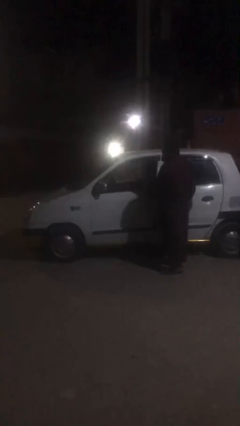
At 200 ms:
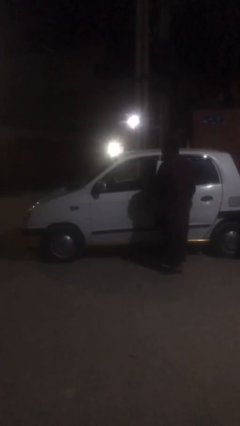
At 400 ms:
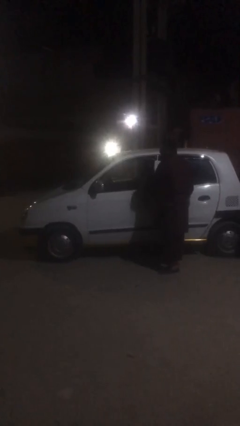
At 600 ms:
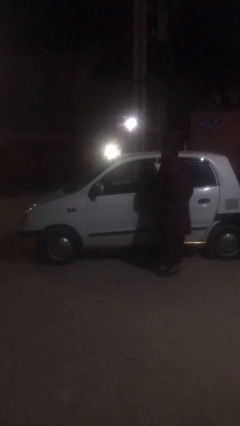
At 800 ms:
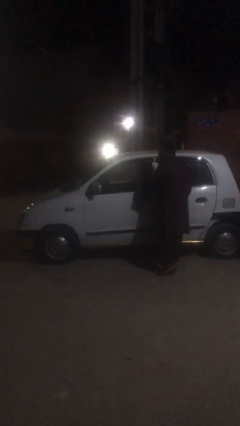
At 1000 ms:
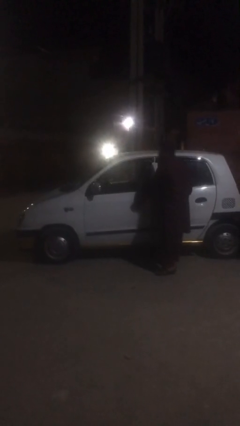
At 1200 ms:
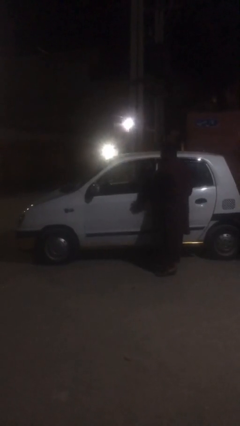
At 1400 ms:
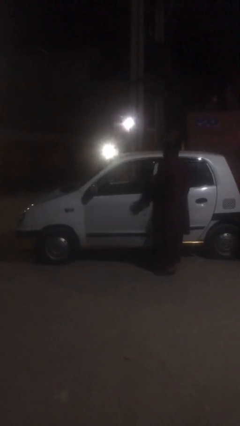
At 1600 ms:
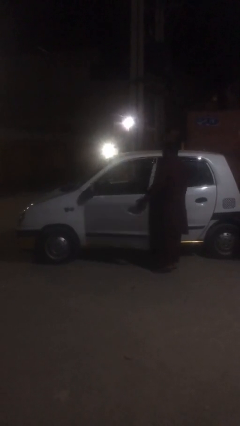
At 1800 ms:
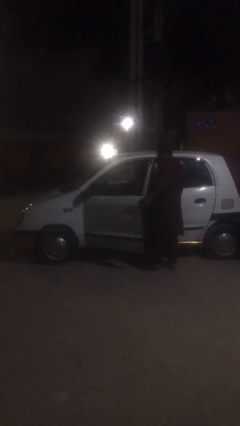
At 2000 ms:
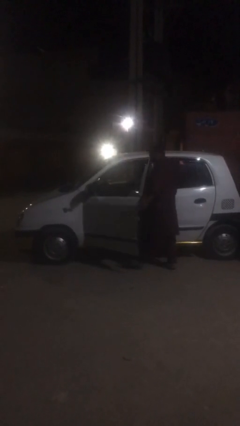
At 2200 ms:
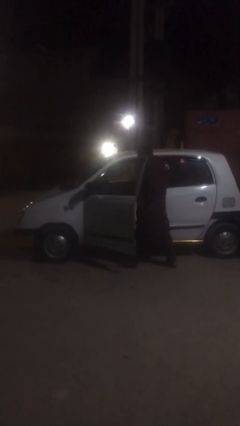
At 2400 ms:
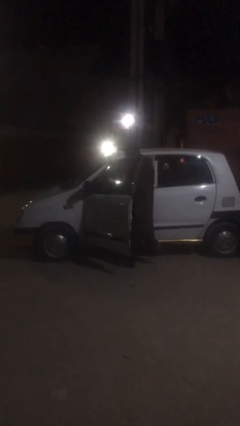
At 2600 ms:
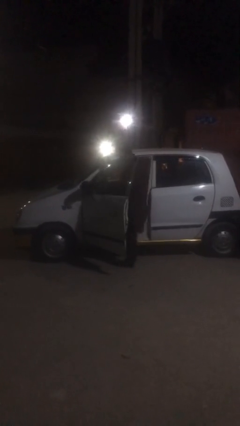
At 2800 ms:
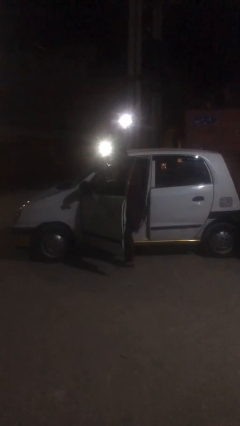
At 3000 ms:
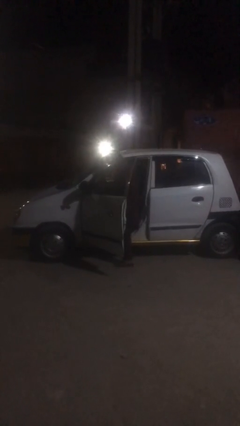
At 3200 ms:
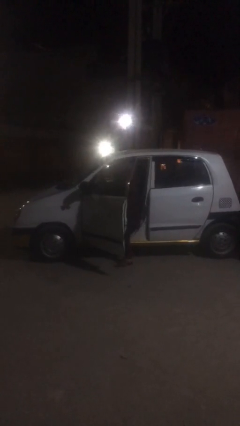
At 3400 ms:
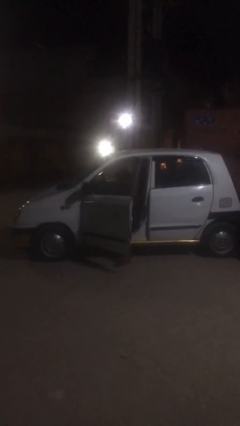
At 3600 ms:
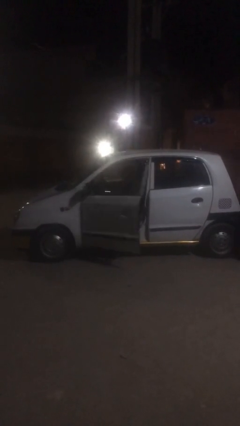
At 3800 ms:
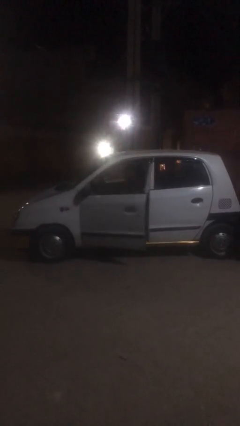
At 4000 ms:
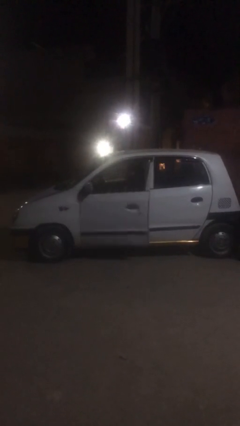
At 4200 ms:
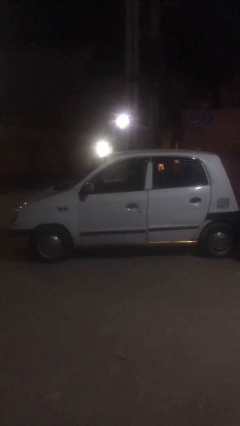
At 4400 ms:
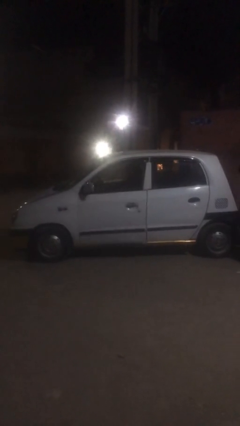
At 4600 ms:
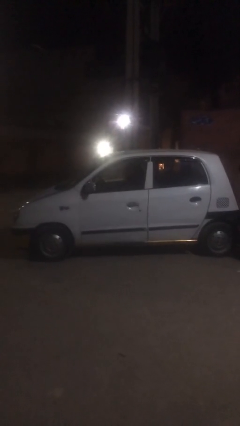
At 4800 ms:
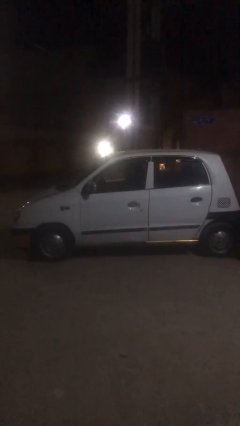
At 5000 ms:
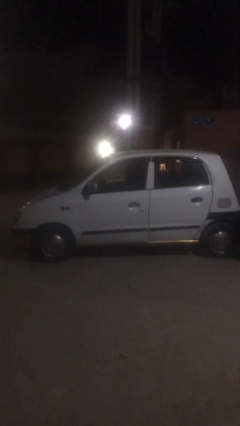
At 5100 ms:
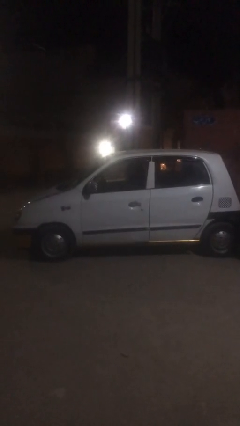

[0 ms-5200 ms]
car picks up person

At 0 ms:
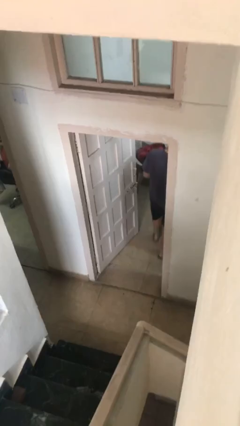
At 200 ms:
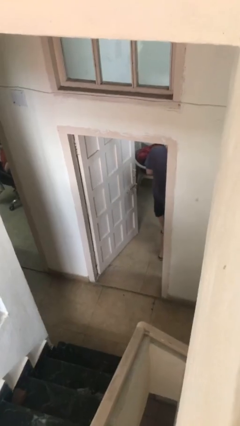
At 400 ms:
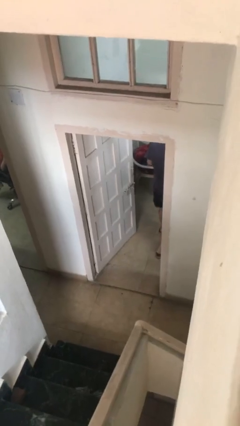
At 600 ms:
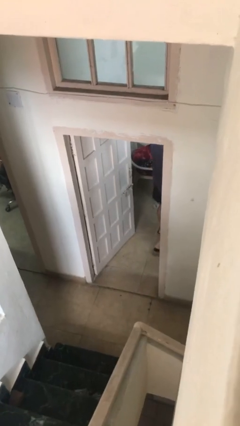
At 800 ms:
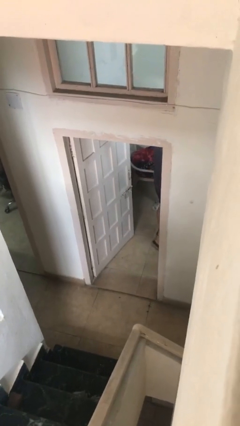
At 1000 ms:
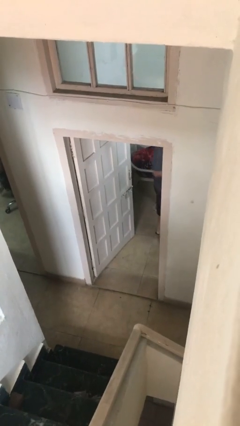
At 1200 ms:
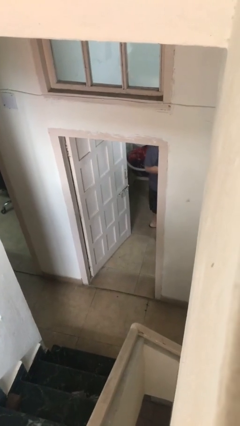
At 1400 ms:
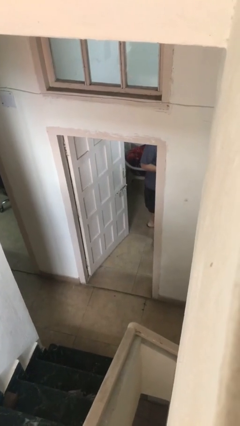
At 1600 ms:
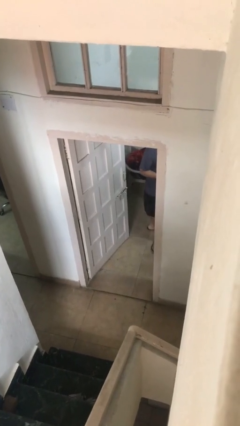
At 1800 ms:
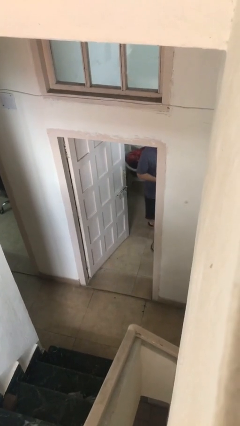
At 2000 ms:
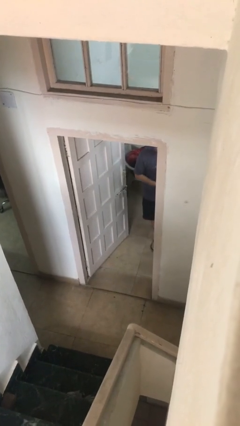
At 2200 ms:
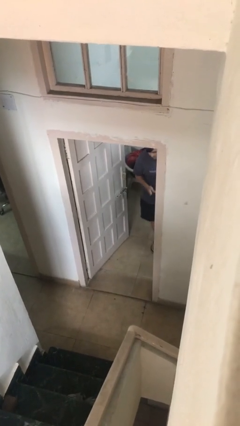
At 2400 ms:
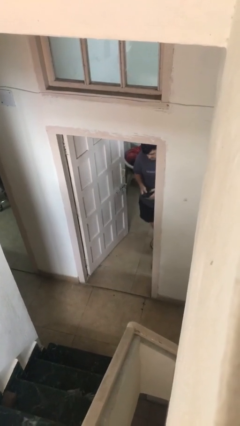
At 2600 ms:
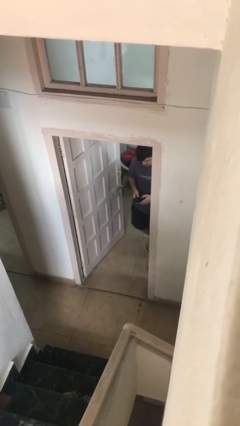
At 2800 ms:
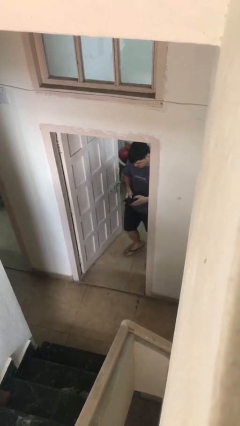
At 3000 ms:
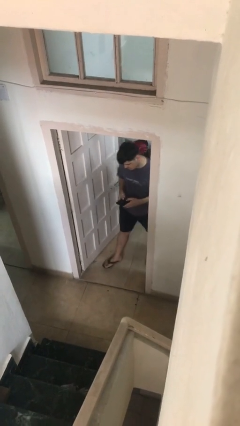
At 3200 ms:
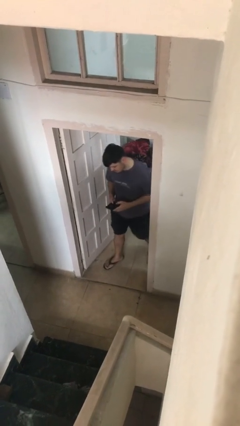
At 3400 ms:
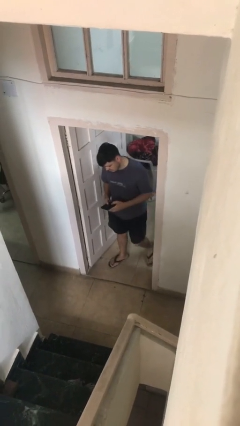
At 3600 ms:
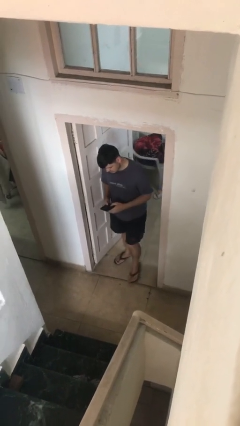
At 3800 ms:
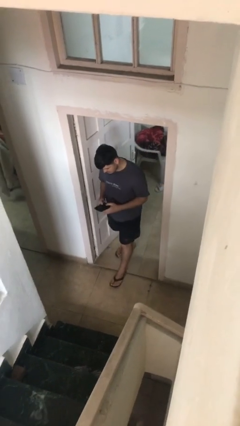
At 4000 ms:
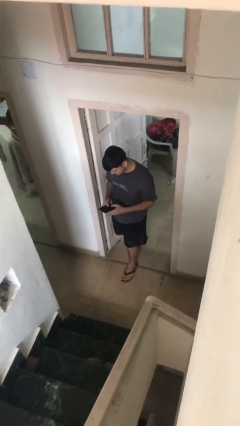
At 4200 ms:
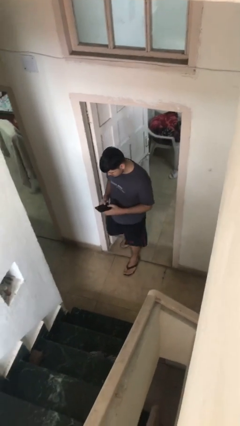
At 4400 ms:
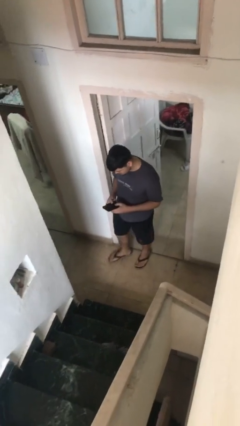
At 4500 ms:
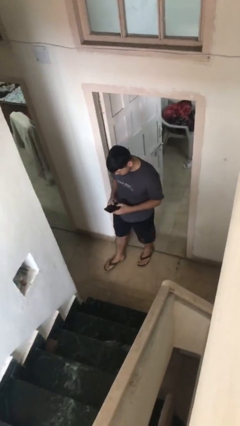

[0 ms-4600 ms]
person enters scene through structure

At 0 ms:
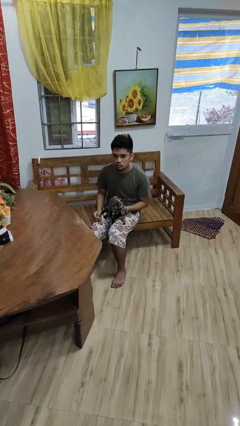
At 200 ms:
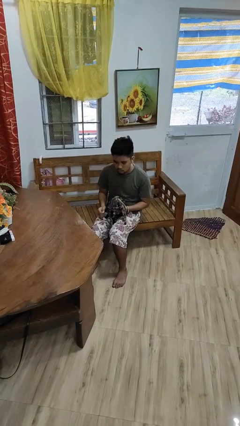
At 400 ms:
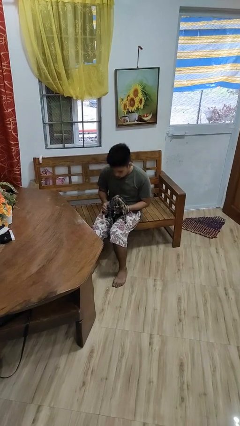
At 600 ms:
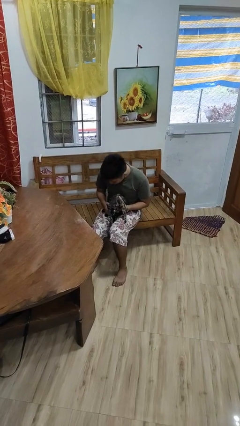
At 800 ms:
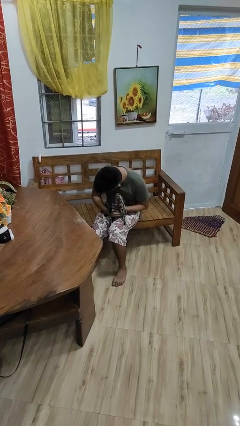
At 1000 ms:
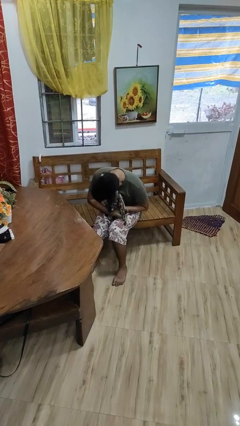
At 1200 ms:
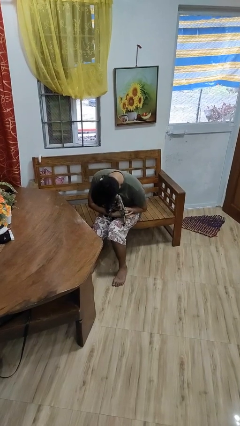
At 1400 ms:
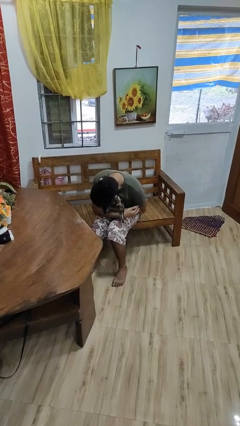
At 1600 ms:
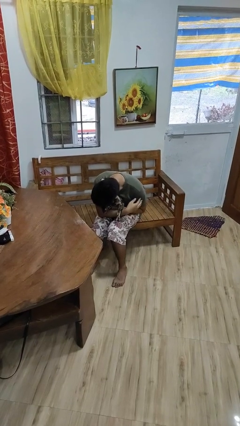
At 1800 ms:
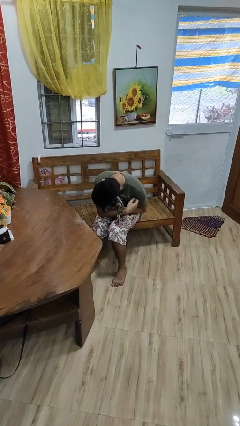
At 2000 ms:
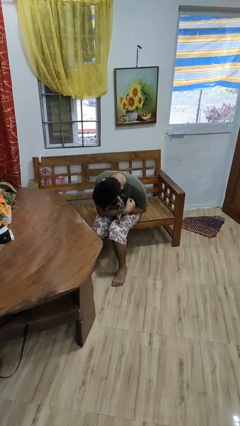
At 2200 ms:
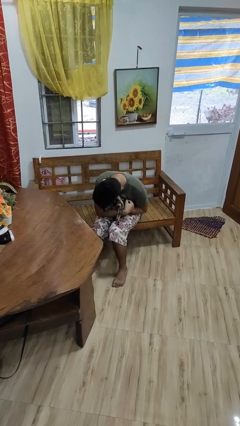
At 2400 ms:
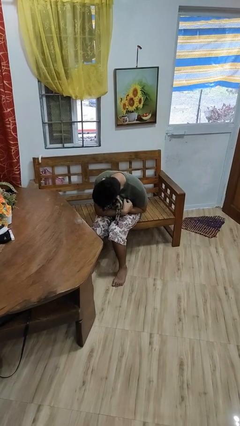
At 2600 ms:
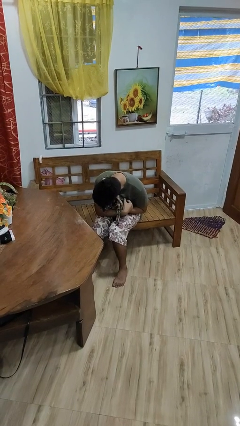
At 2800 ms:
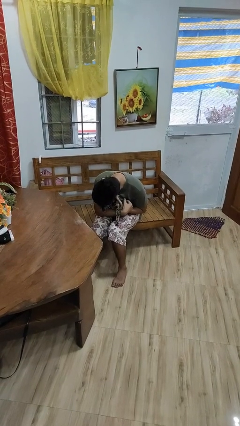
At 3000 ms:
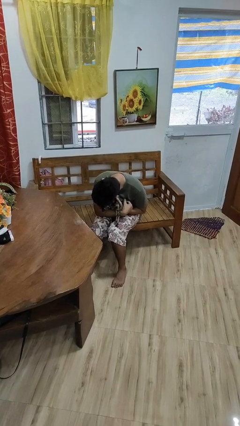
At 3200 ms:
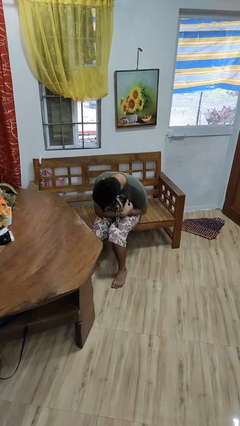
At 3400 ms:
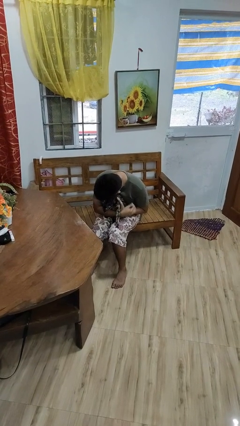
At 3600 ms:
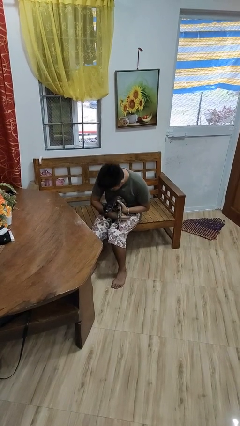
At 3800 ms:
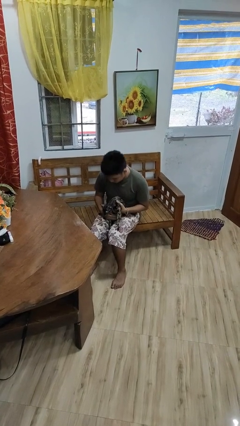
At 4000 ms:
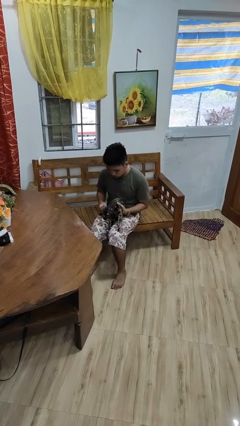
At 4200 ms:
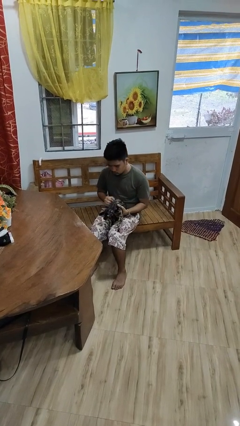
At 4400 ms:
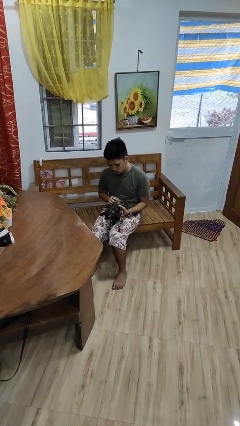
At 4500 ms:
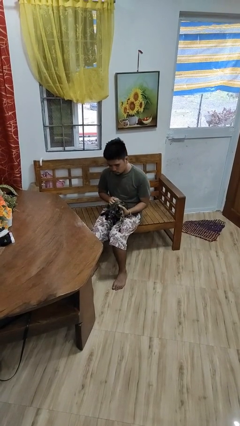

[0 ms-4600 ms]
person hugs cat

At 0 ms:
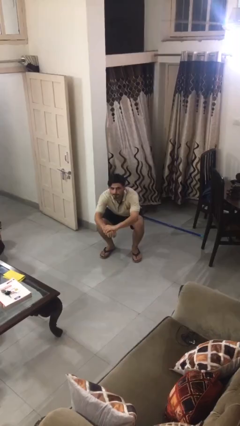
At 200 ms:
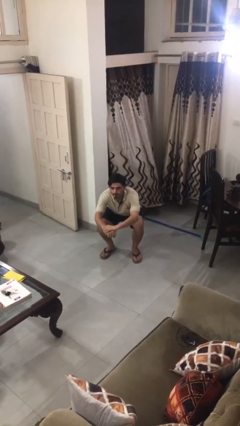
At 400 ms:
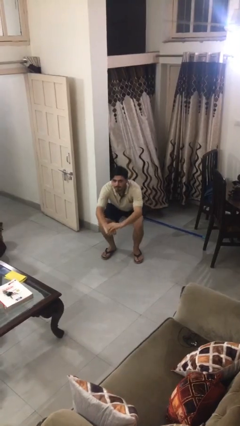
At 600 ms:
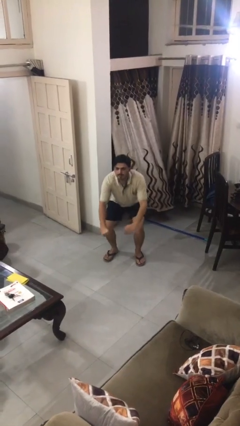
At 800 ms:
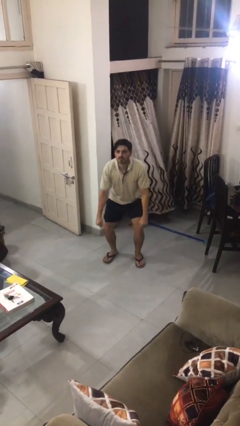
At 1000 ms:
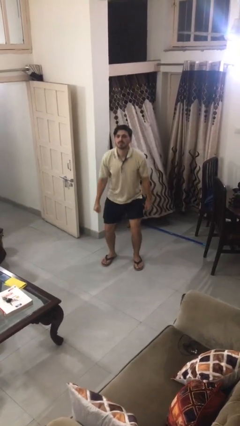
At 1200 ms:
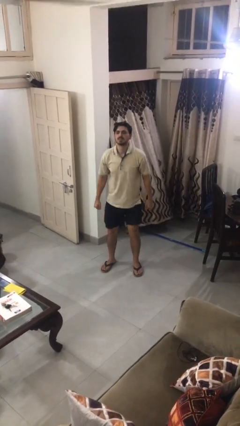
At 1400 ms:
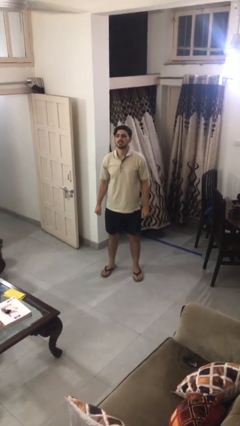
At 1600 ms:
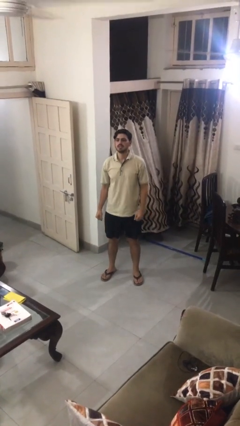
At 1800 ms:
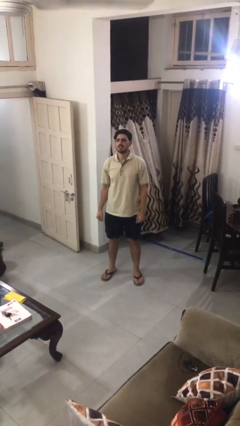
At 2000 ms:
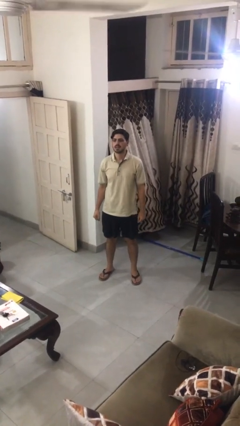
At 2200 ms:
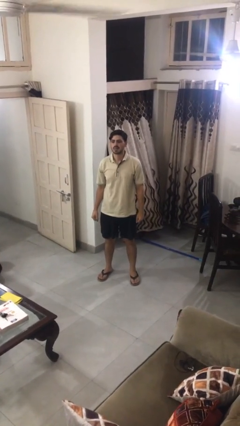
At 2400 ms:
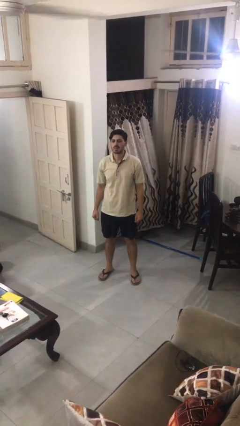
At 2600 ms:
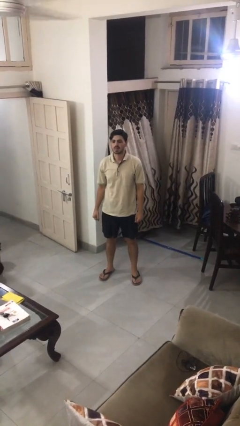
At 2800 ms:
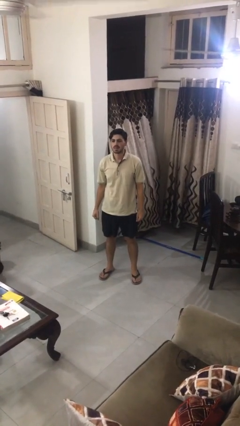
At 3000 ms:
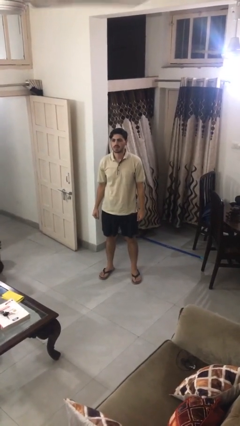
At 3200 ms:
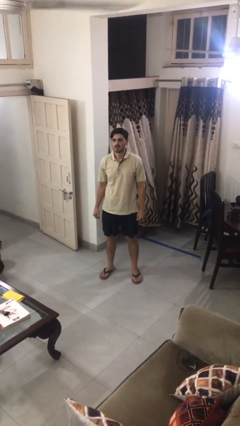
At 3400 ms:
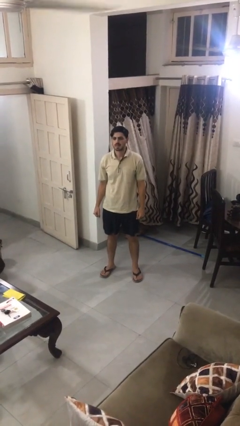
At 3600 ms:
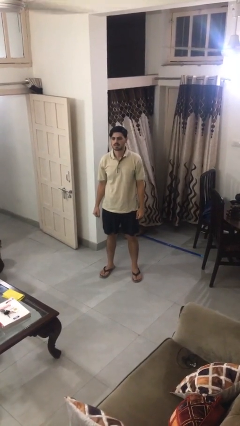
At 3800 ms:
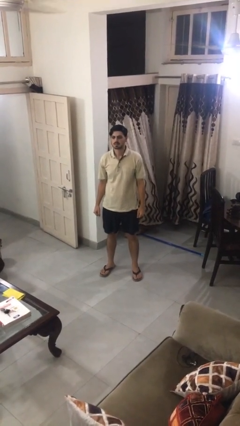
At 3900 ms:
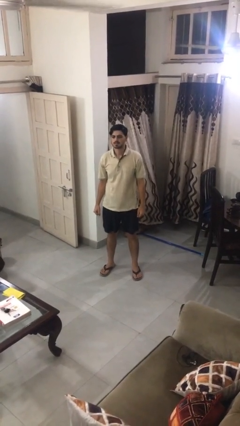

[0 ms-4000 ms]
person stands up
